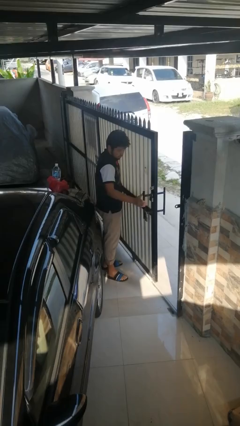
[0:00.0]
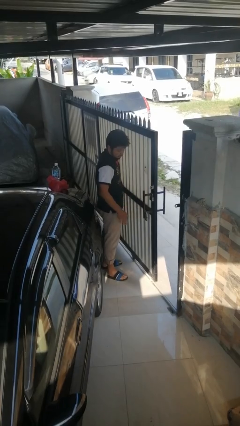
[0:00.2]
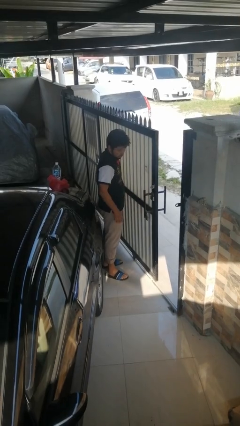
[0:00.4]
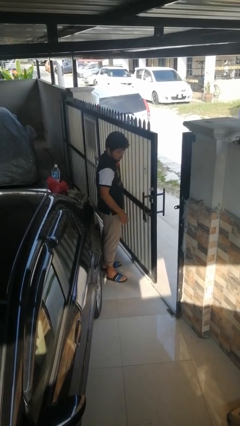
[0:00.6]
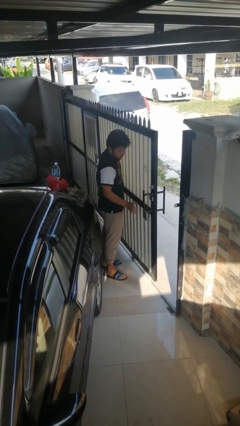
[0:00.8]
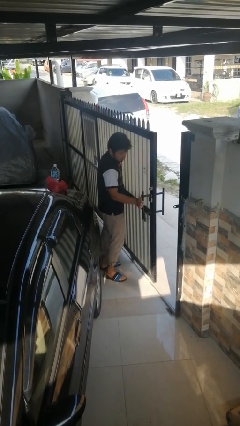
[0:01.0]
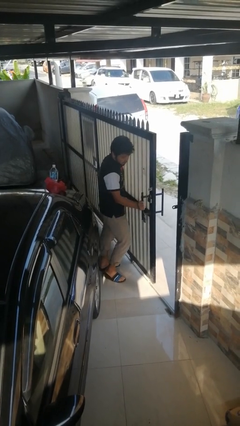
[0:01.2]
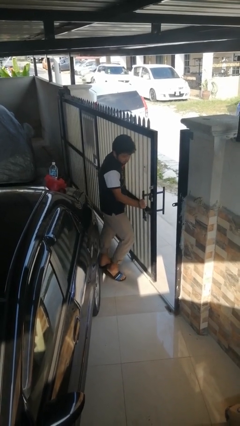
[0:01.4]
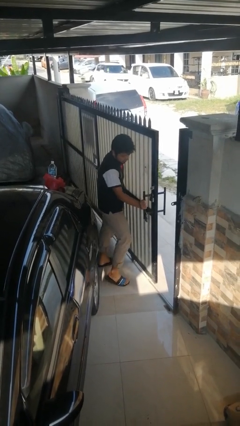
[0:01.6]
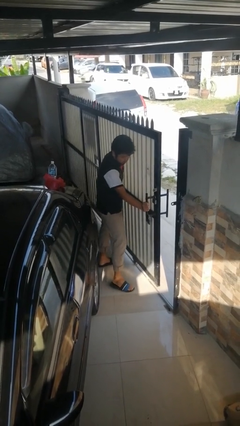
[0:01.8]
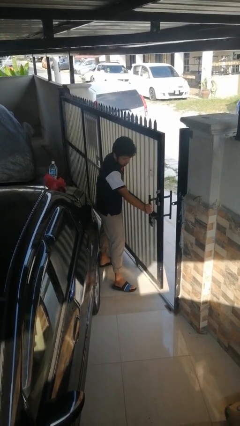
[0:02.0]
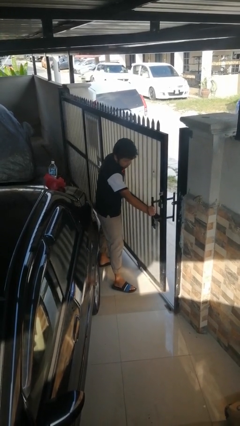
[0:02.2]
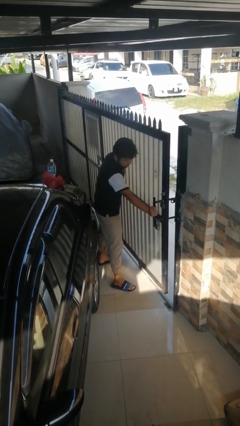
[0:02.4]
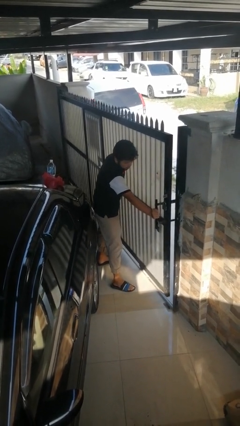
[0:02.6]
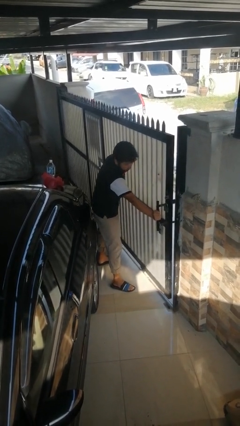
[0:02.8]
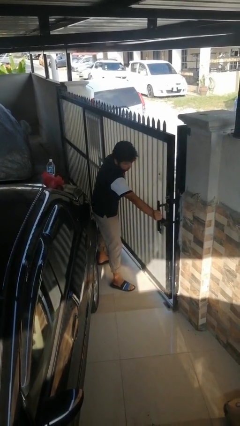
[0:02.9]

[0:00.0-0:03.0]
person closes sliding door

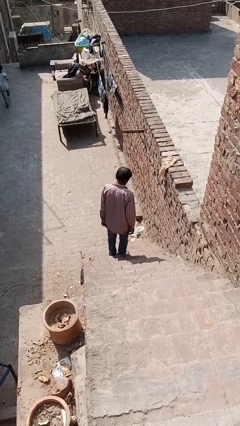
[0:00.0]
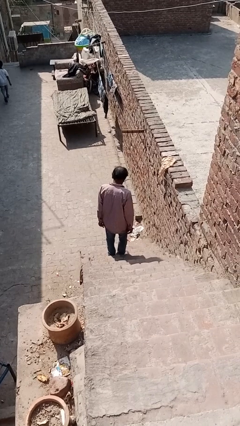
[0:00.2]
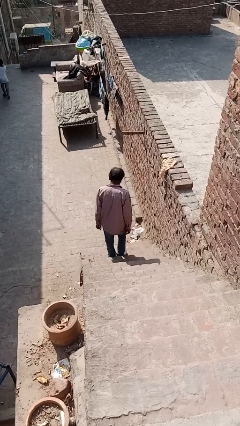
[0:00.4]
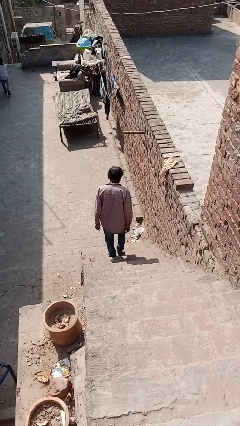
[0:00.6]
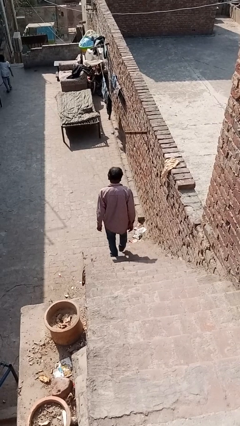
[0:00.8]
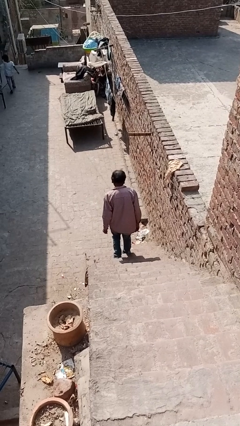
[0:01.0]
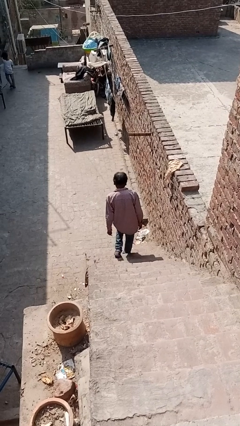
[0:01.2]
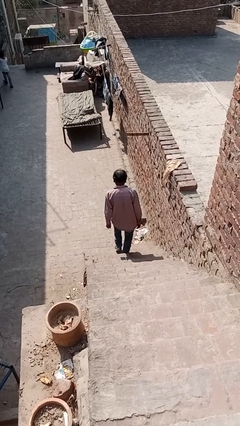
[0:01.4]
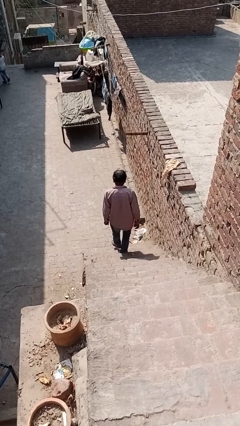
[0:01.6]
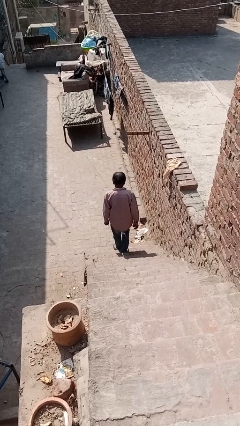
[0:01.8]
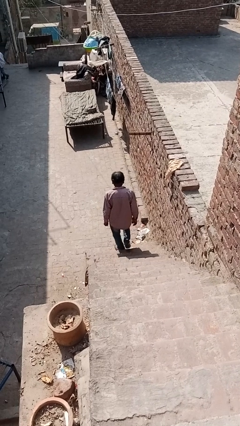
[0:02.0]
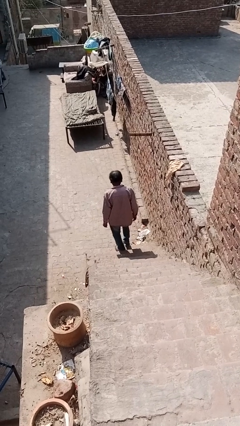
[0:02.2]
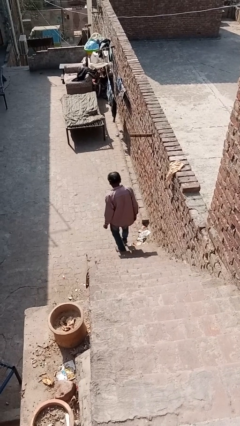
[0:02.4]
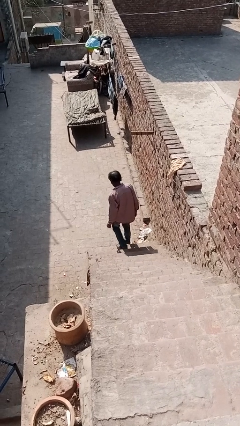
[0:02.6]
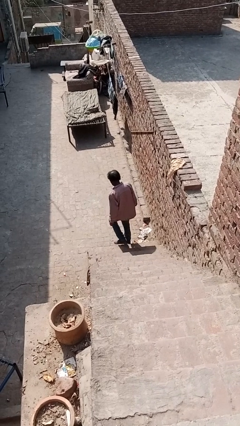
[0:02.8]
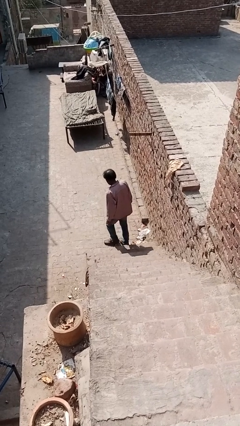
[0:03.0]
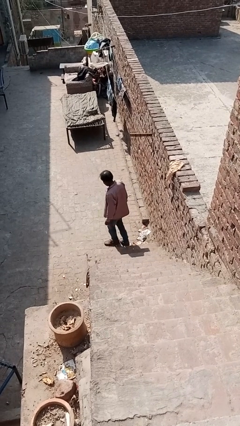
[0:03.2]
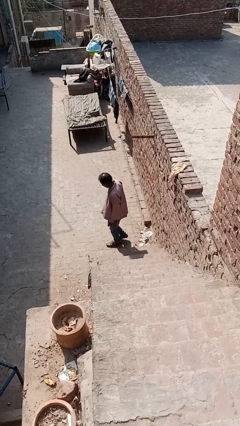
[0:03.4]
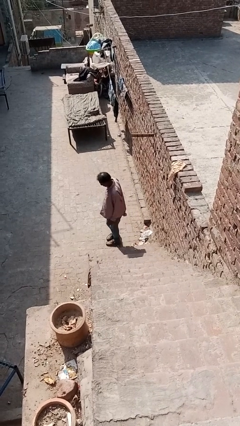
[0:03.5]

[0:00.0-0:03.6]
person climbs down stairs

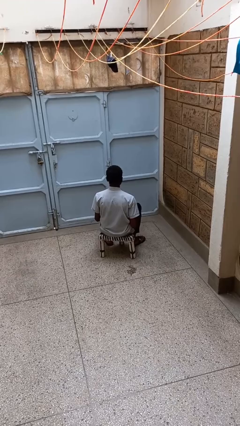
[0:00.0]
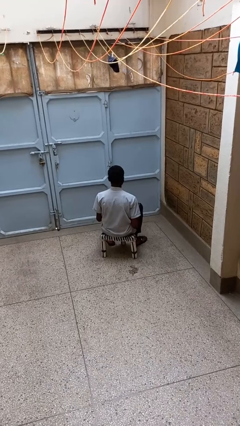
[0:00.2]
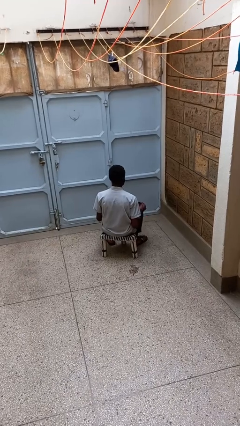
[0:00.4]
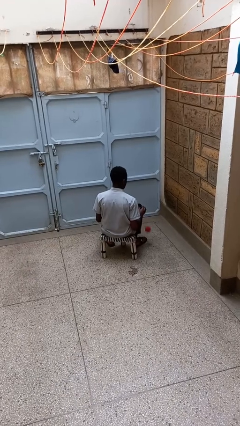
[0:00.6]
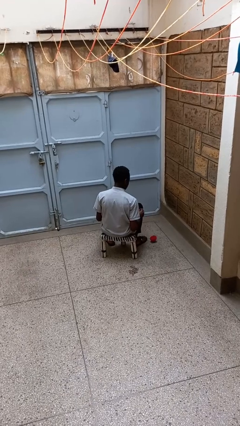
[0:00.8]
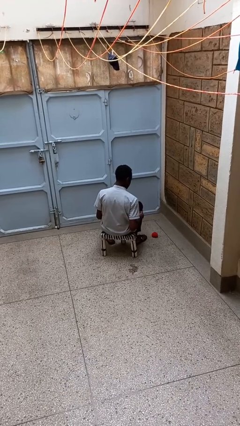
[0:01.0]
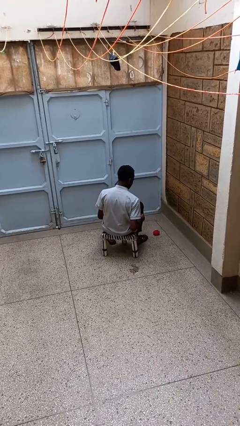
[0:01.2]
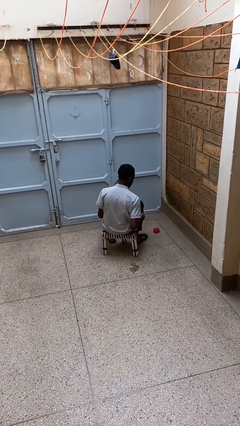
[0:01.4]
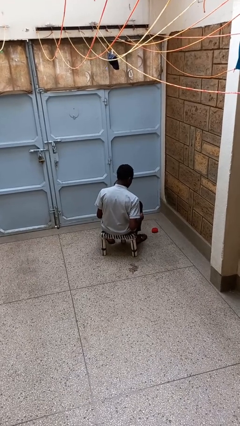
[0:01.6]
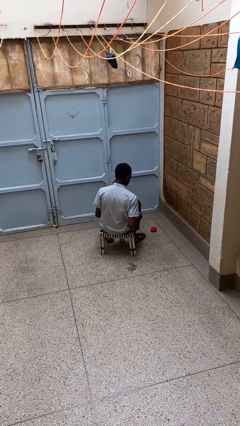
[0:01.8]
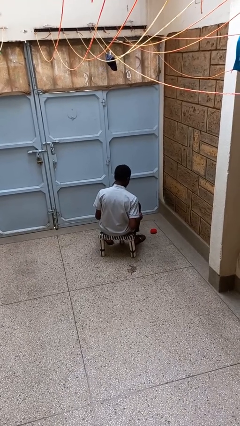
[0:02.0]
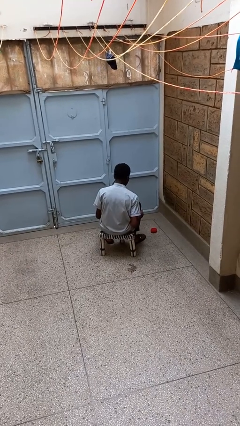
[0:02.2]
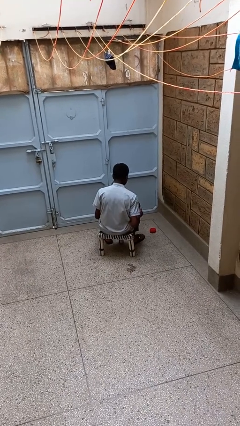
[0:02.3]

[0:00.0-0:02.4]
person drops object

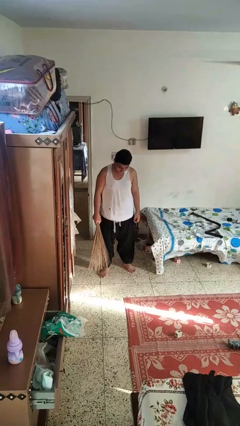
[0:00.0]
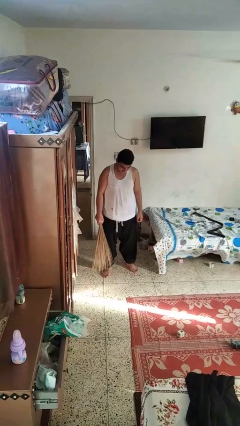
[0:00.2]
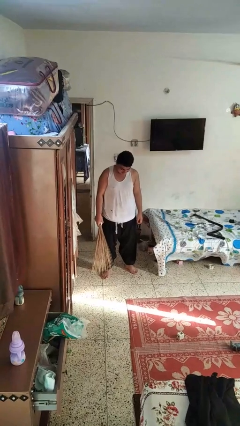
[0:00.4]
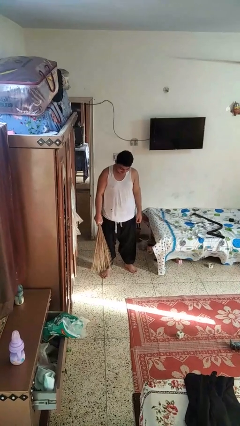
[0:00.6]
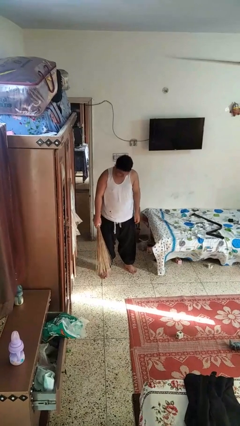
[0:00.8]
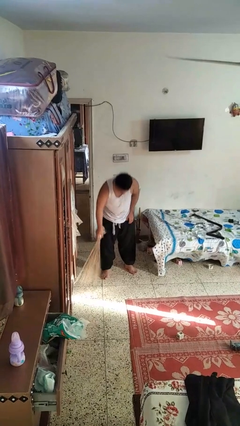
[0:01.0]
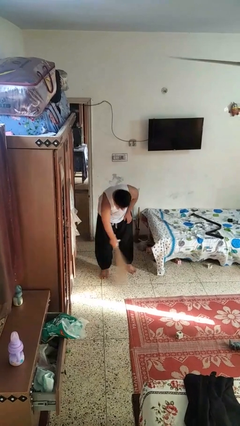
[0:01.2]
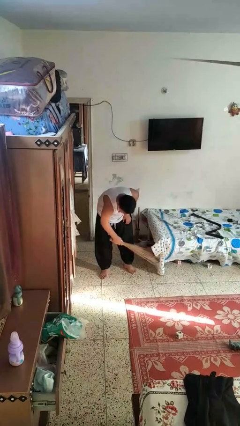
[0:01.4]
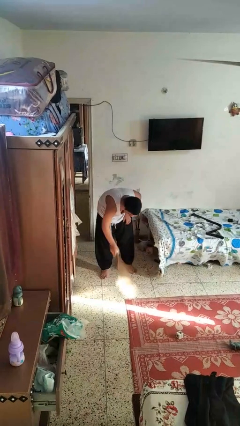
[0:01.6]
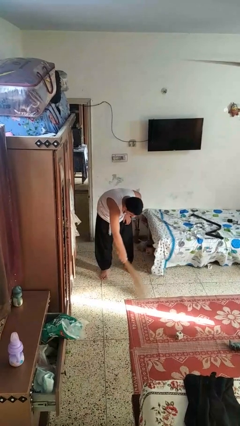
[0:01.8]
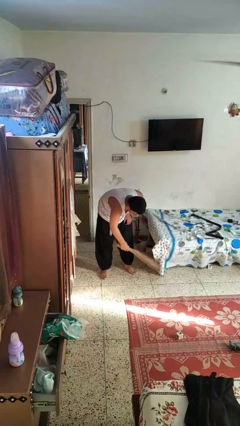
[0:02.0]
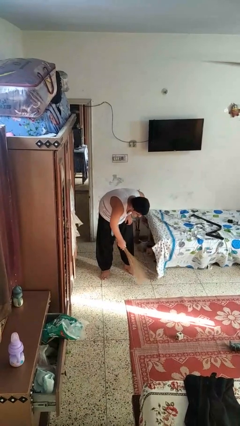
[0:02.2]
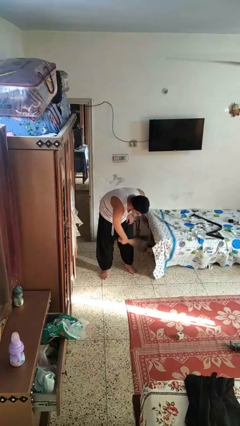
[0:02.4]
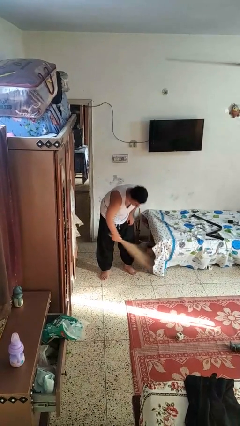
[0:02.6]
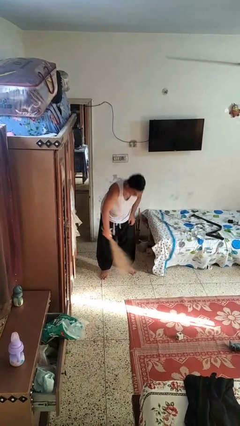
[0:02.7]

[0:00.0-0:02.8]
person sweeps floor

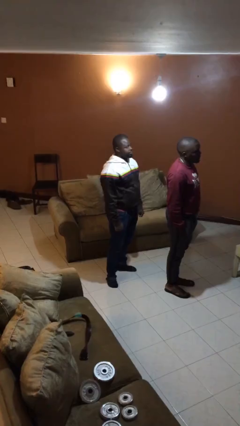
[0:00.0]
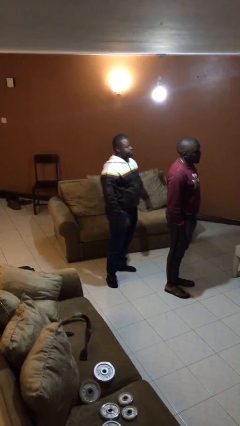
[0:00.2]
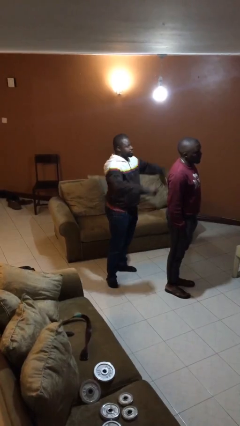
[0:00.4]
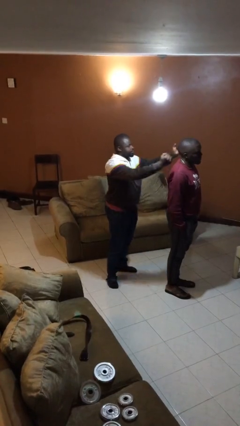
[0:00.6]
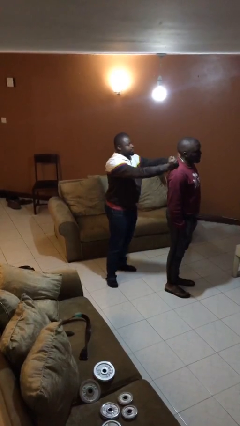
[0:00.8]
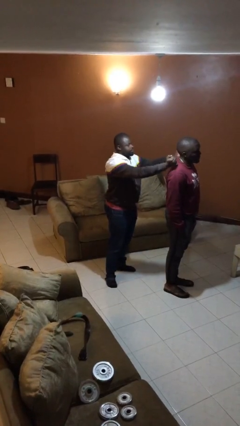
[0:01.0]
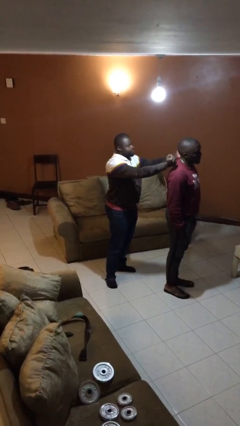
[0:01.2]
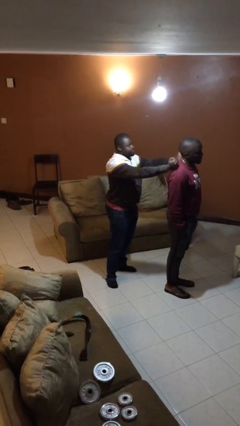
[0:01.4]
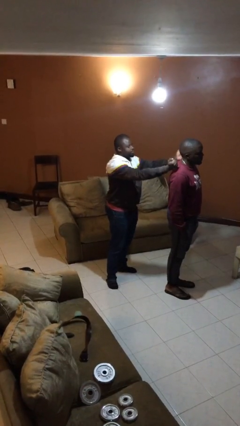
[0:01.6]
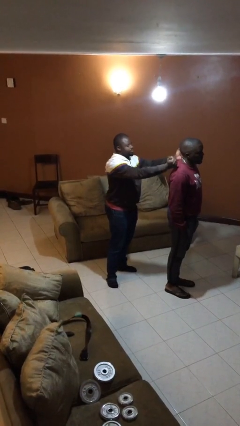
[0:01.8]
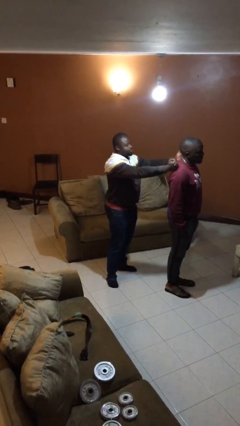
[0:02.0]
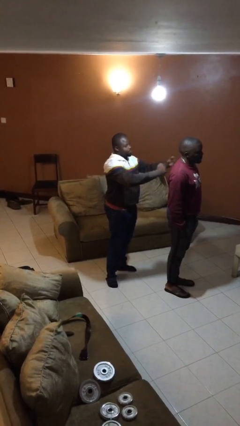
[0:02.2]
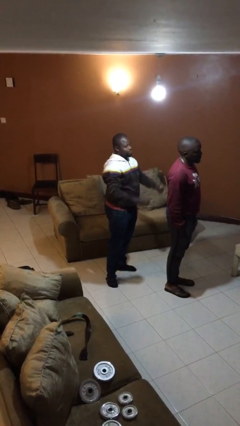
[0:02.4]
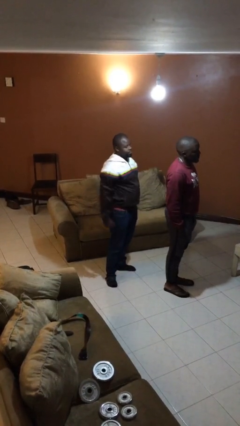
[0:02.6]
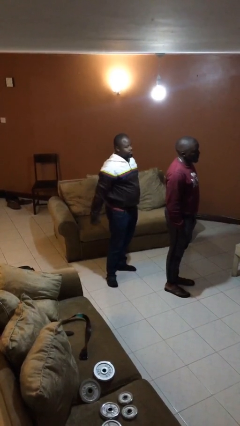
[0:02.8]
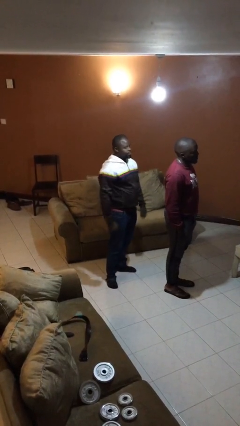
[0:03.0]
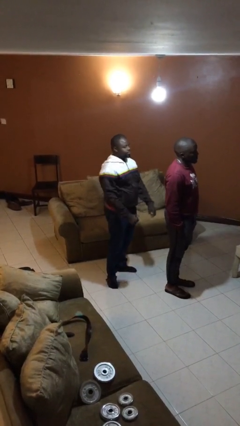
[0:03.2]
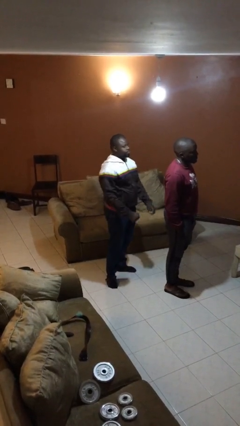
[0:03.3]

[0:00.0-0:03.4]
person pounds shoulders of person

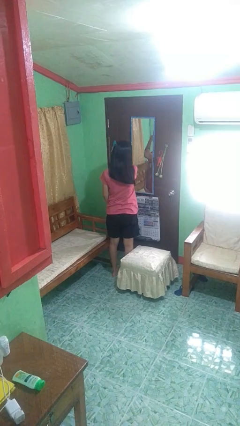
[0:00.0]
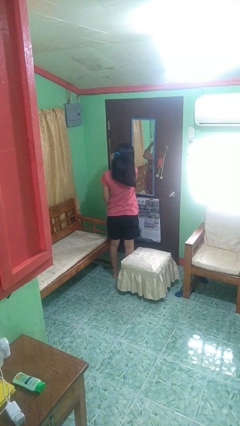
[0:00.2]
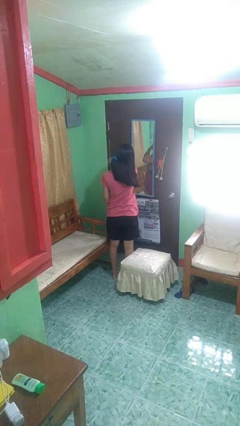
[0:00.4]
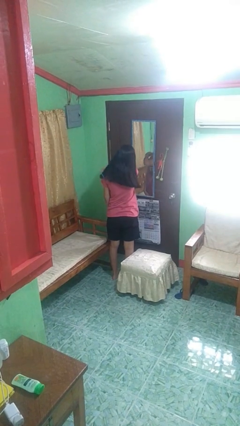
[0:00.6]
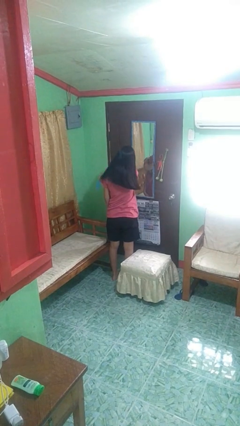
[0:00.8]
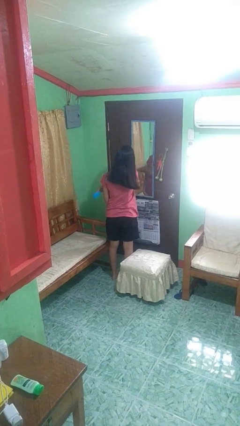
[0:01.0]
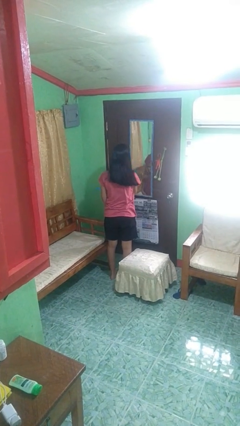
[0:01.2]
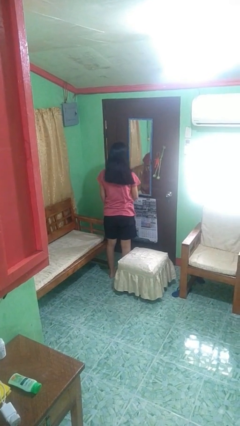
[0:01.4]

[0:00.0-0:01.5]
person brushes hair

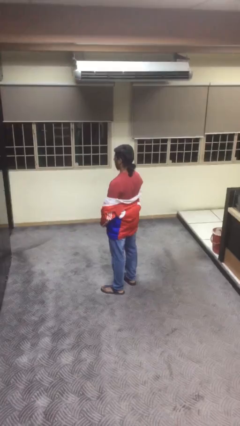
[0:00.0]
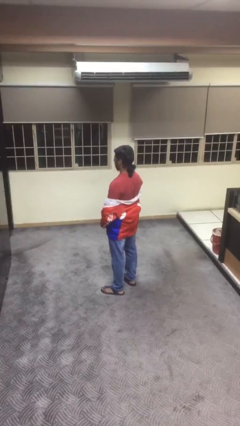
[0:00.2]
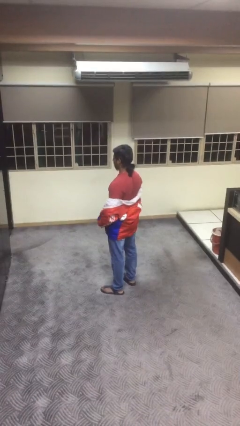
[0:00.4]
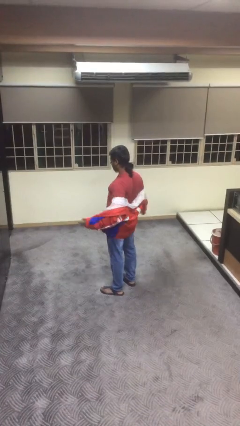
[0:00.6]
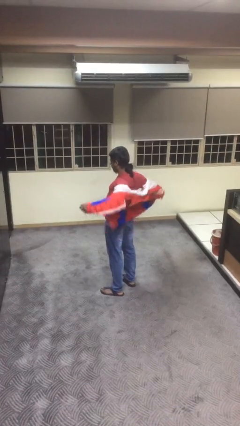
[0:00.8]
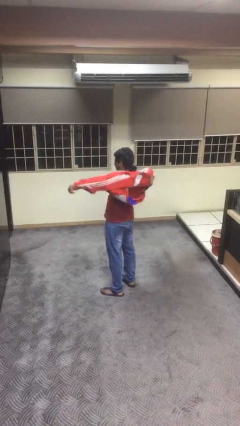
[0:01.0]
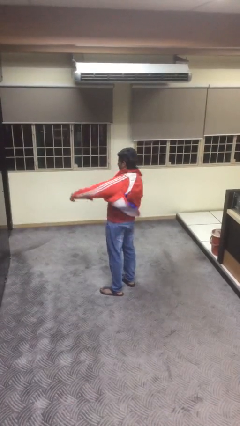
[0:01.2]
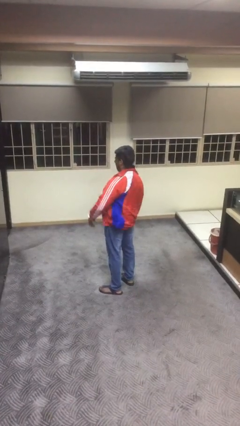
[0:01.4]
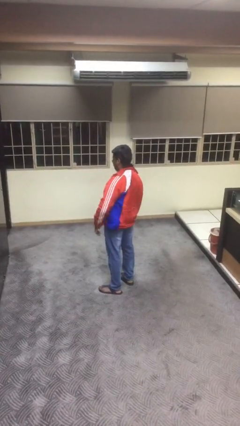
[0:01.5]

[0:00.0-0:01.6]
person puts on jacket
